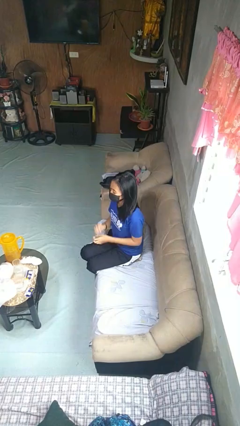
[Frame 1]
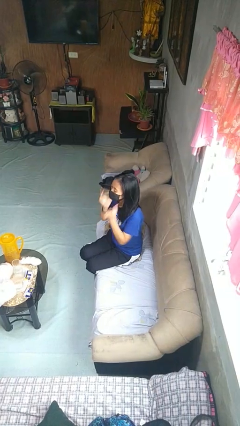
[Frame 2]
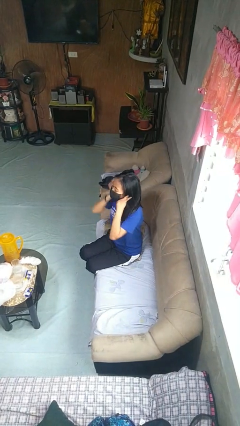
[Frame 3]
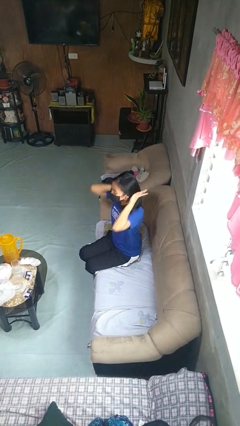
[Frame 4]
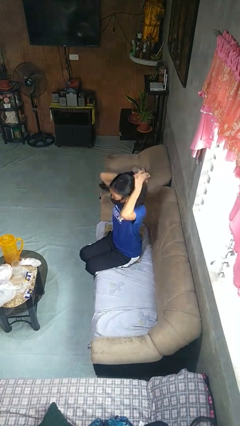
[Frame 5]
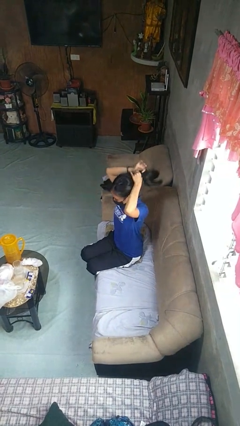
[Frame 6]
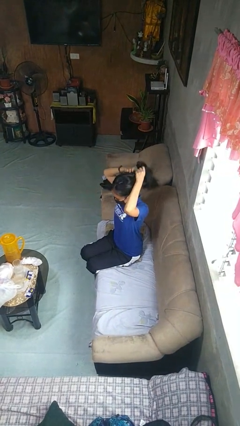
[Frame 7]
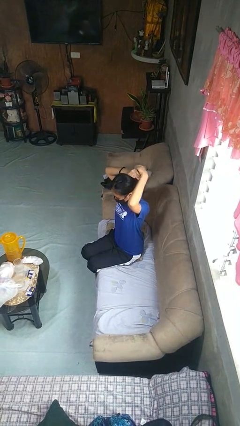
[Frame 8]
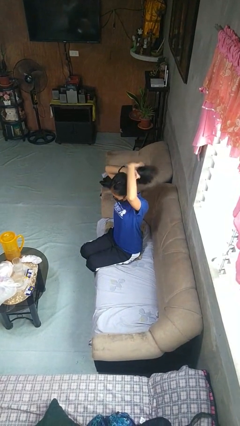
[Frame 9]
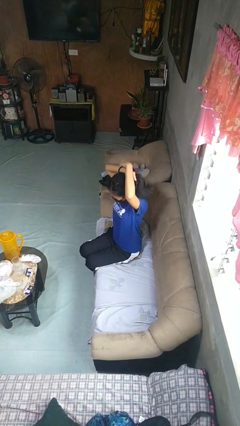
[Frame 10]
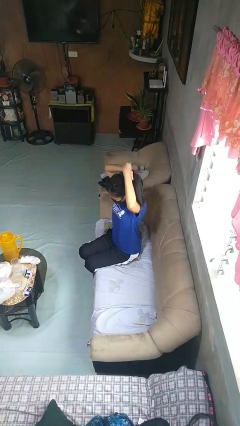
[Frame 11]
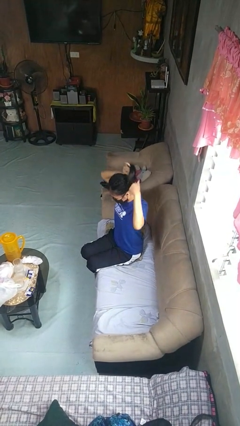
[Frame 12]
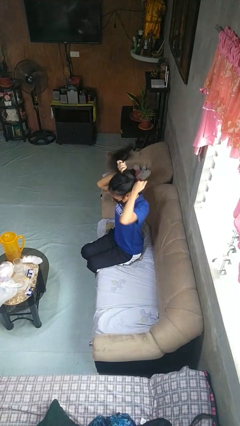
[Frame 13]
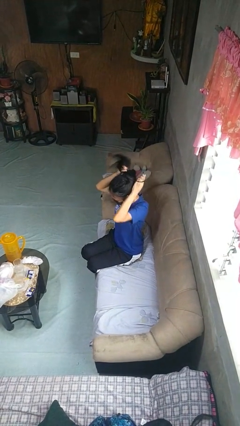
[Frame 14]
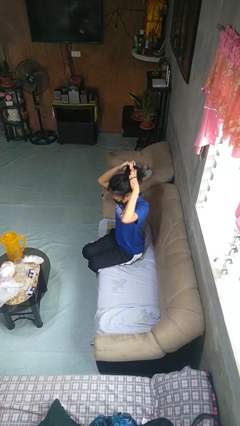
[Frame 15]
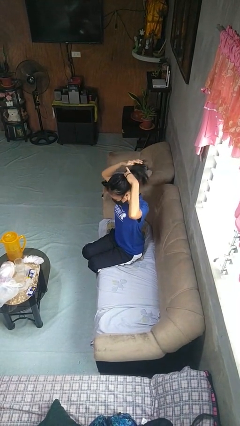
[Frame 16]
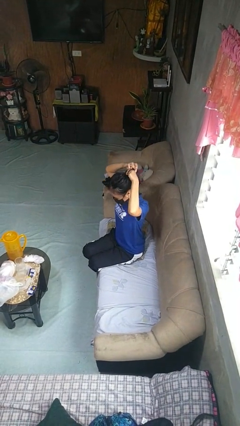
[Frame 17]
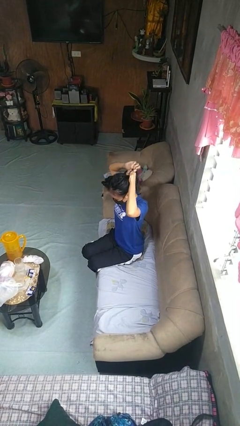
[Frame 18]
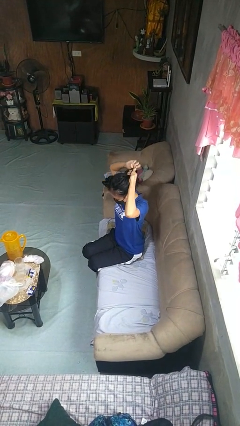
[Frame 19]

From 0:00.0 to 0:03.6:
person puts hair in ponytail

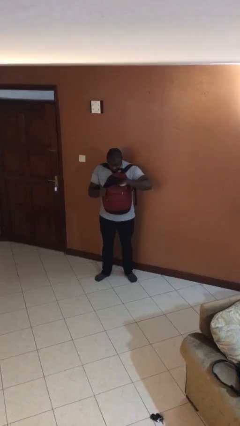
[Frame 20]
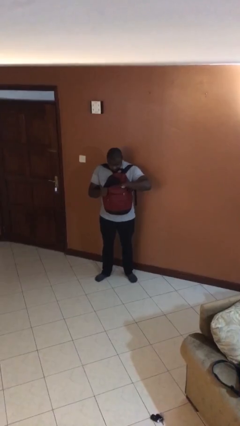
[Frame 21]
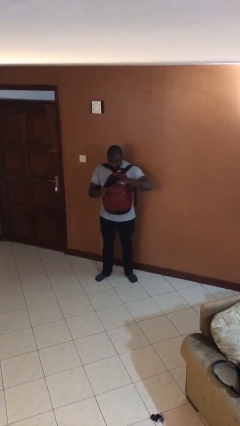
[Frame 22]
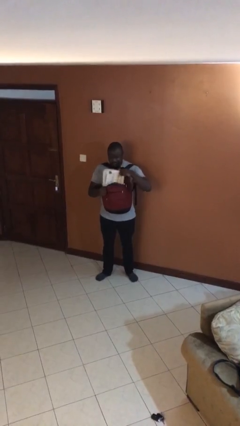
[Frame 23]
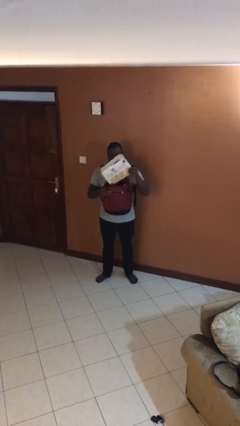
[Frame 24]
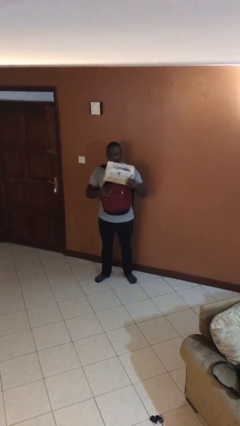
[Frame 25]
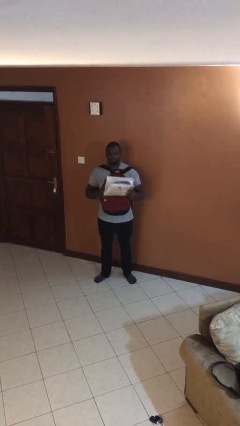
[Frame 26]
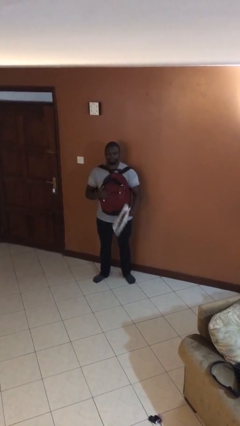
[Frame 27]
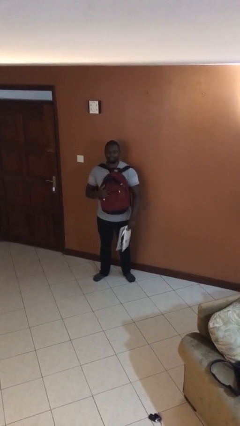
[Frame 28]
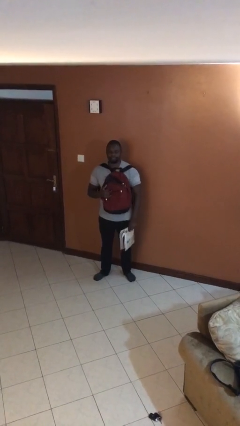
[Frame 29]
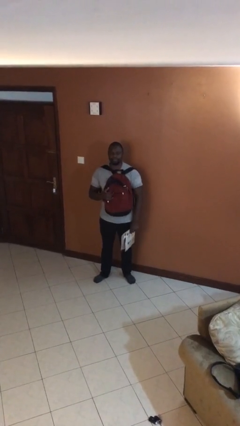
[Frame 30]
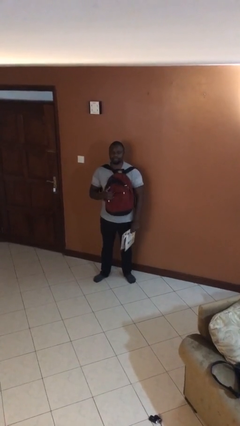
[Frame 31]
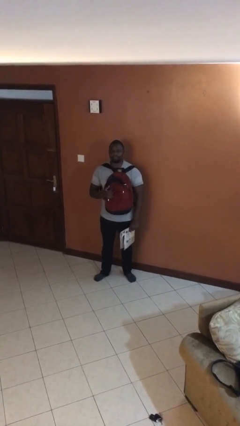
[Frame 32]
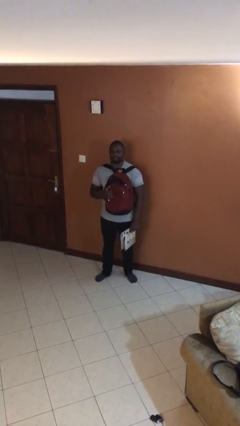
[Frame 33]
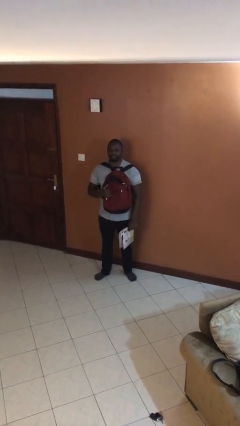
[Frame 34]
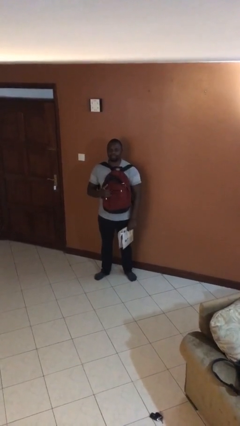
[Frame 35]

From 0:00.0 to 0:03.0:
person takes object from backpack

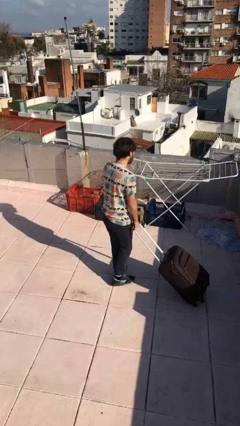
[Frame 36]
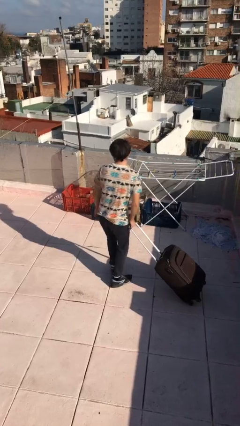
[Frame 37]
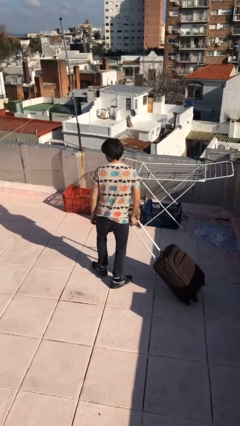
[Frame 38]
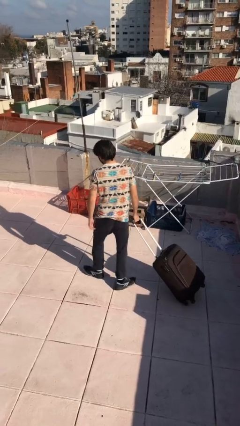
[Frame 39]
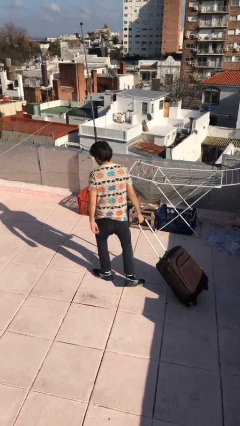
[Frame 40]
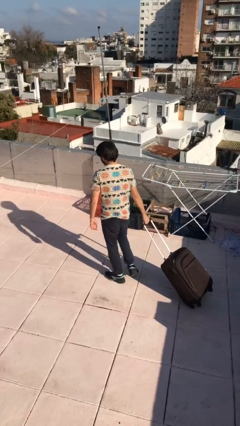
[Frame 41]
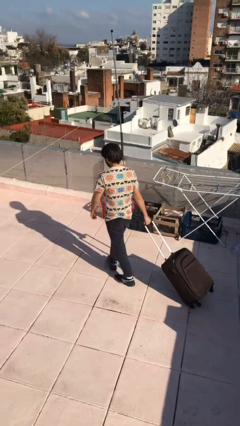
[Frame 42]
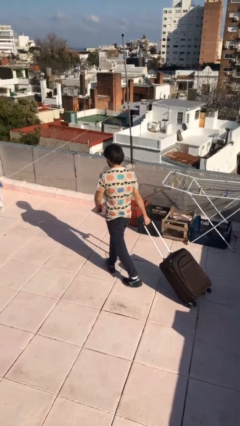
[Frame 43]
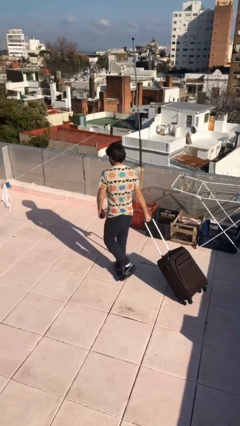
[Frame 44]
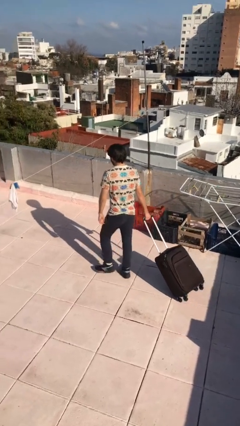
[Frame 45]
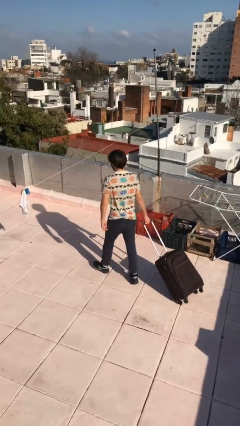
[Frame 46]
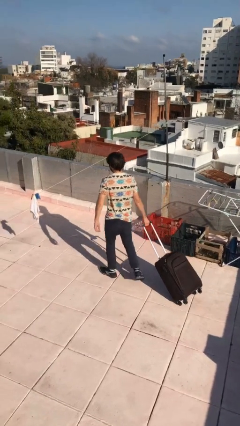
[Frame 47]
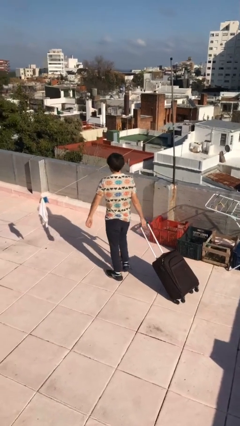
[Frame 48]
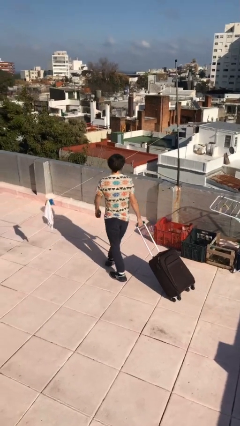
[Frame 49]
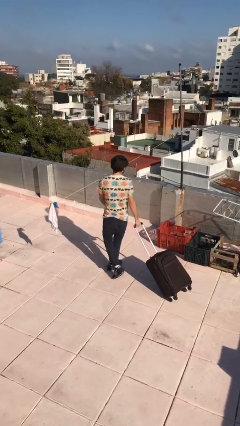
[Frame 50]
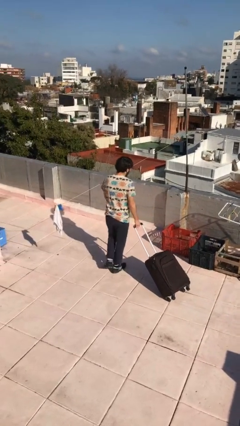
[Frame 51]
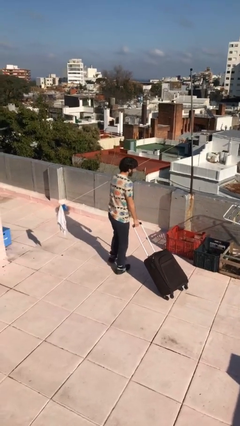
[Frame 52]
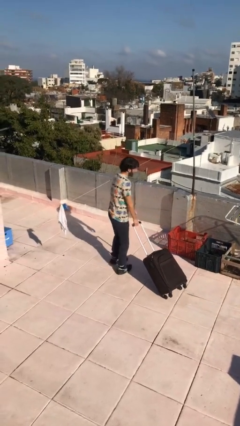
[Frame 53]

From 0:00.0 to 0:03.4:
person pulls wheeled cart

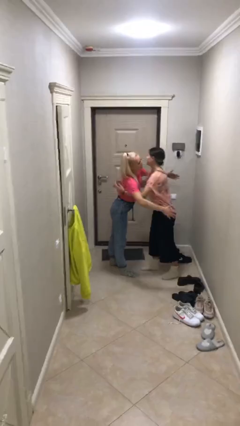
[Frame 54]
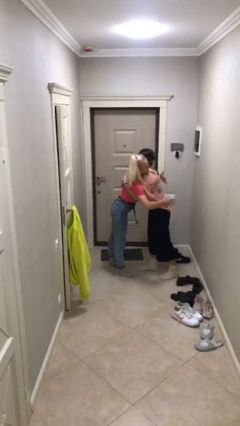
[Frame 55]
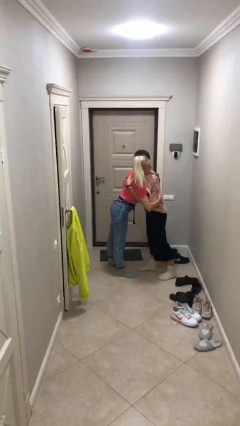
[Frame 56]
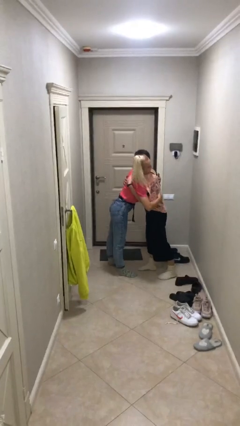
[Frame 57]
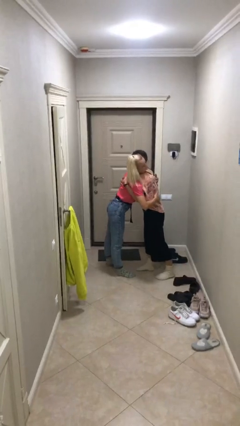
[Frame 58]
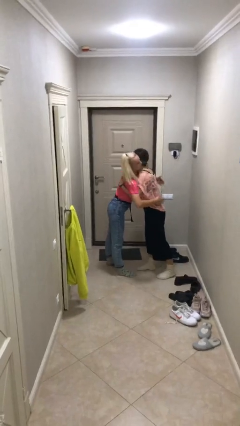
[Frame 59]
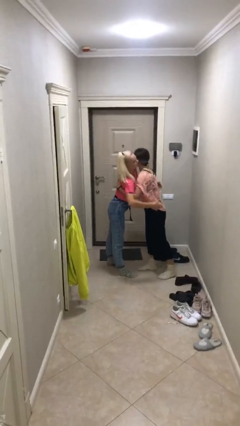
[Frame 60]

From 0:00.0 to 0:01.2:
person embraces person

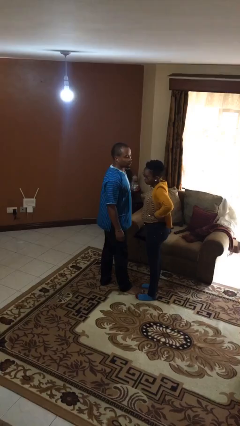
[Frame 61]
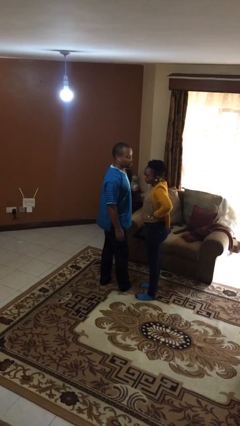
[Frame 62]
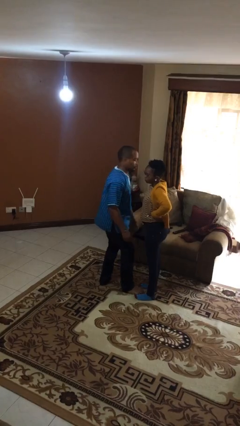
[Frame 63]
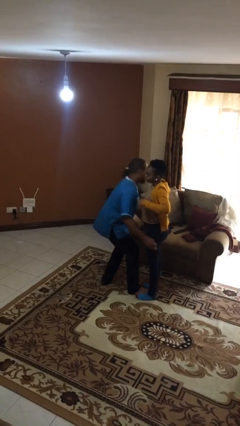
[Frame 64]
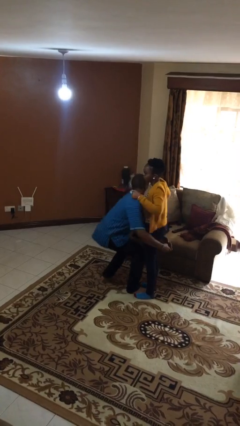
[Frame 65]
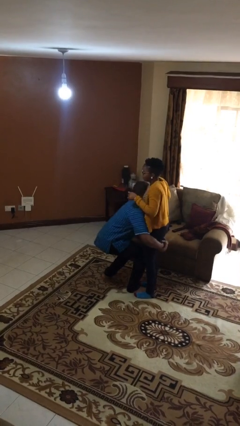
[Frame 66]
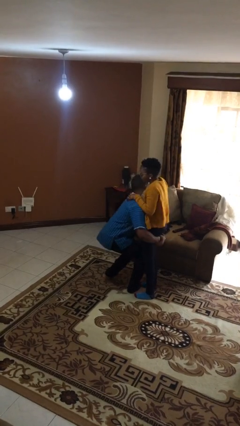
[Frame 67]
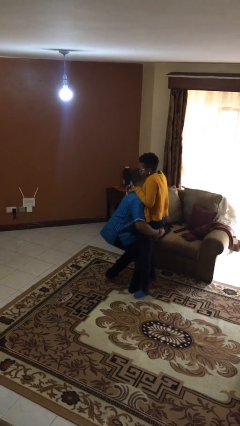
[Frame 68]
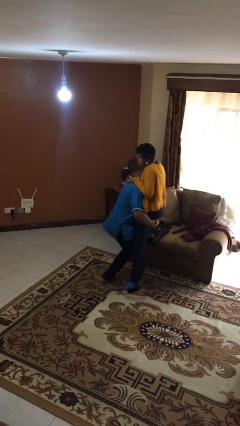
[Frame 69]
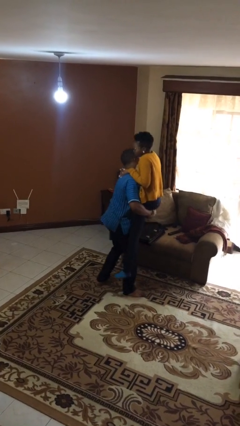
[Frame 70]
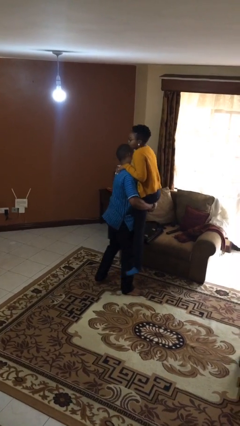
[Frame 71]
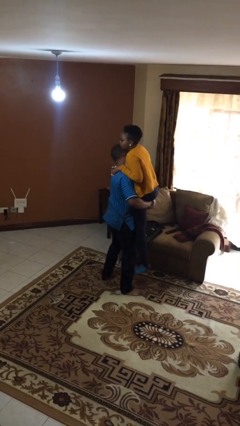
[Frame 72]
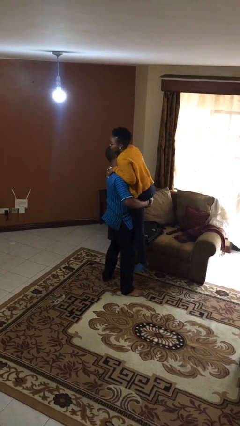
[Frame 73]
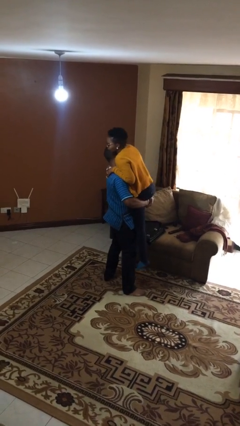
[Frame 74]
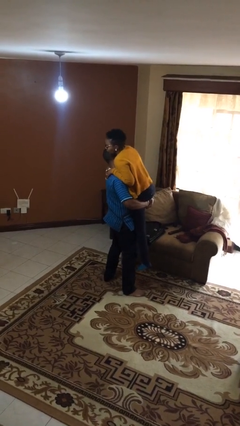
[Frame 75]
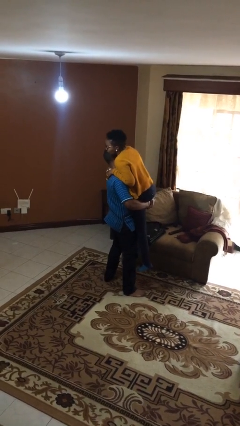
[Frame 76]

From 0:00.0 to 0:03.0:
person picks up person

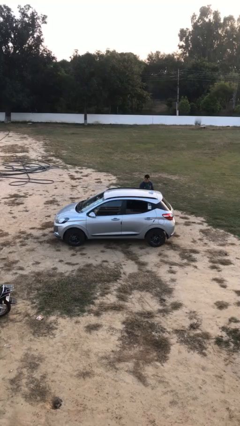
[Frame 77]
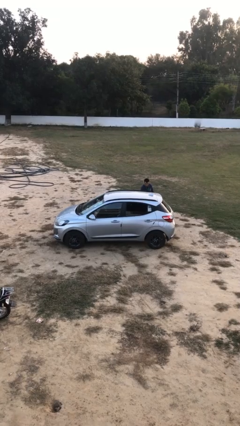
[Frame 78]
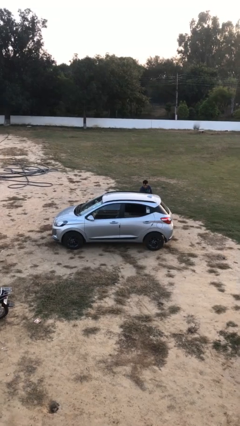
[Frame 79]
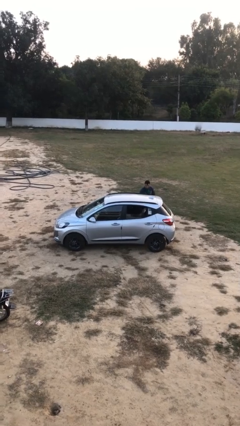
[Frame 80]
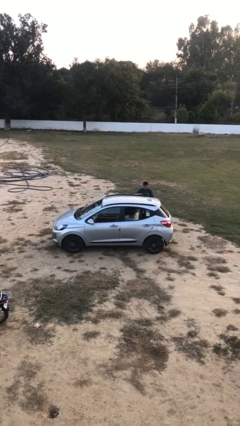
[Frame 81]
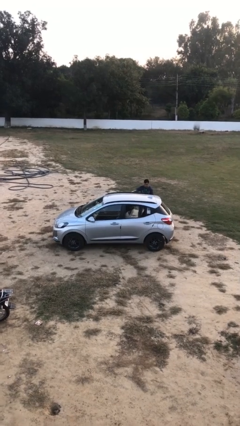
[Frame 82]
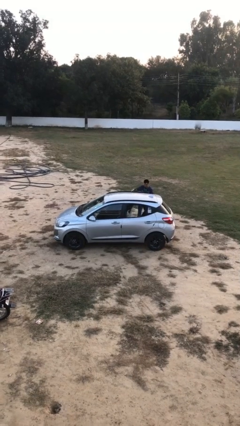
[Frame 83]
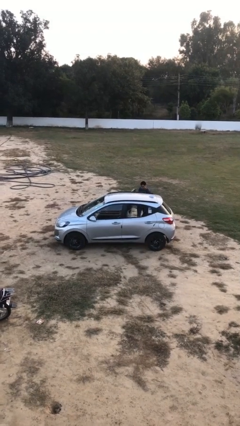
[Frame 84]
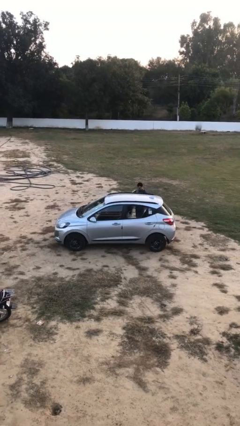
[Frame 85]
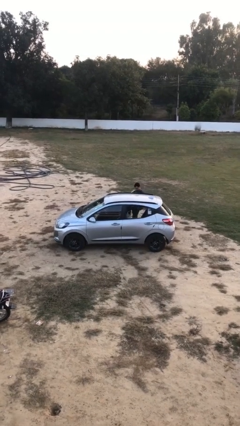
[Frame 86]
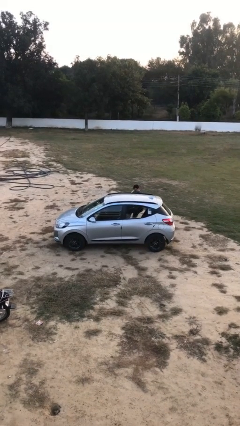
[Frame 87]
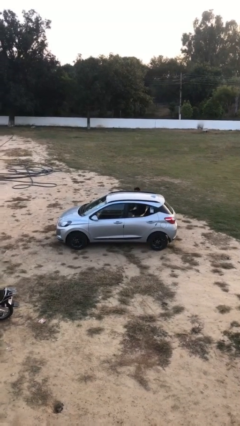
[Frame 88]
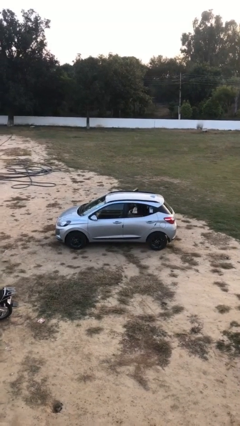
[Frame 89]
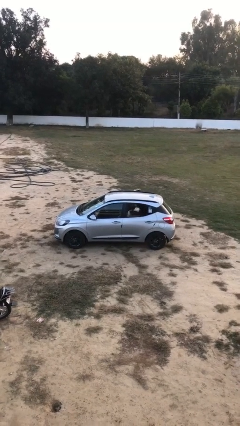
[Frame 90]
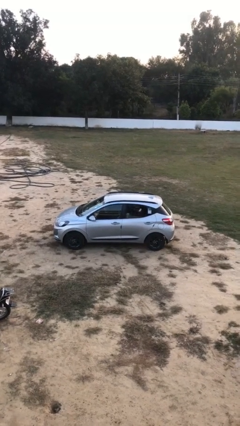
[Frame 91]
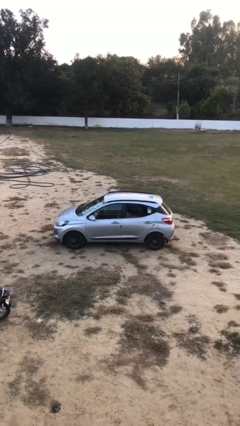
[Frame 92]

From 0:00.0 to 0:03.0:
car picks up person

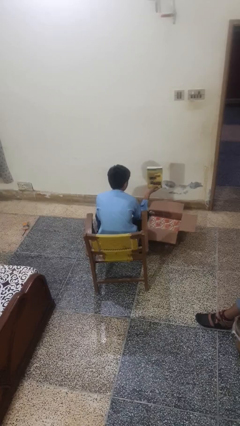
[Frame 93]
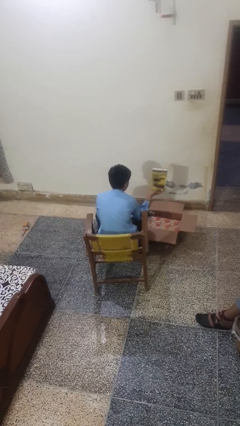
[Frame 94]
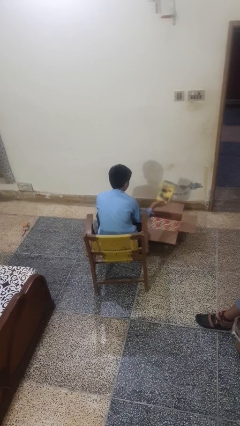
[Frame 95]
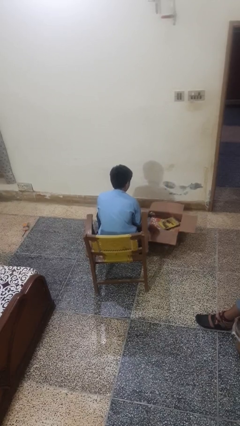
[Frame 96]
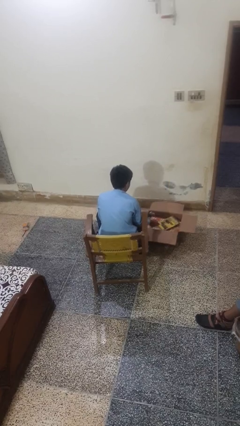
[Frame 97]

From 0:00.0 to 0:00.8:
person puts object into box
